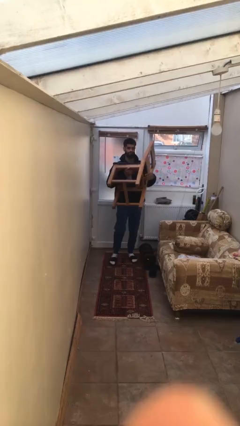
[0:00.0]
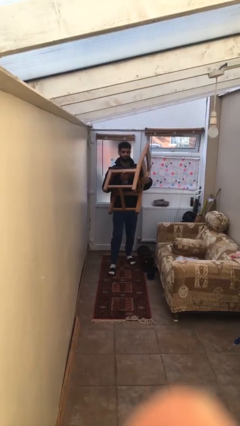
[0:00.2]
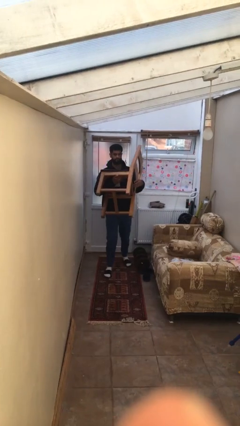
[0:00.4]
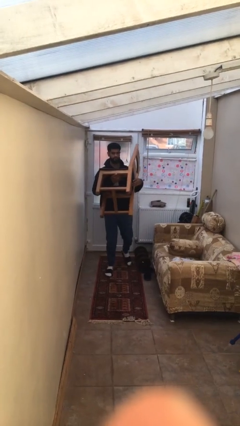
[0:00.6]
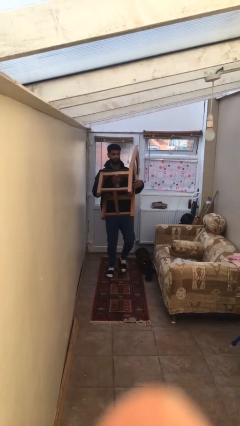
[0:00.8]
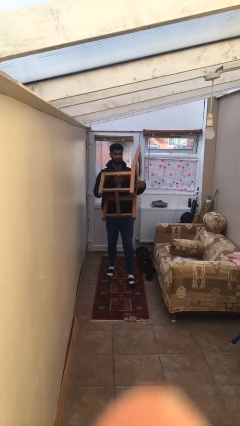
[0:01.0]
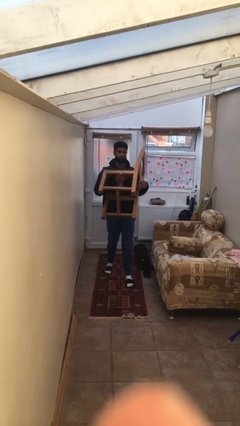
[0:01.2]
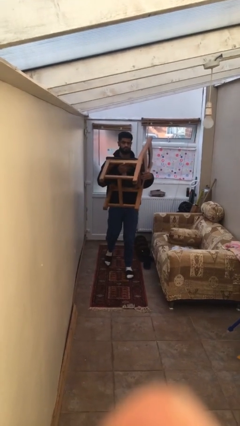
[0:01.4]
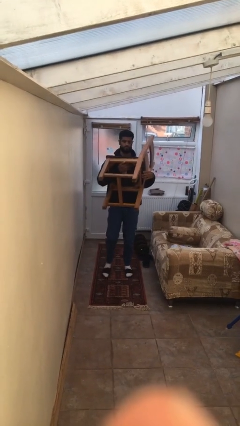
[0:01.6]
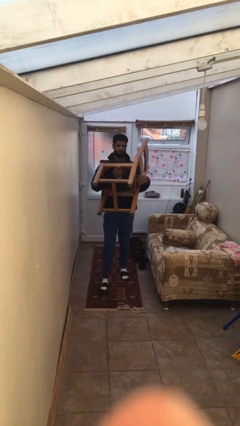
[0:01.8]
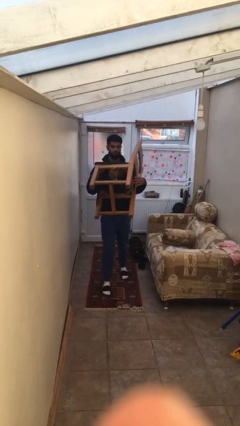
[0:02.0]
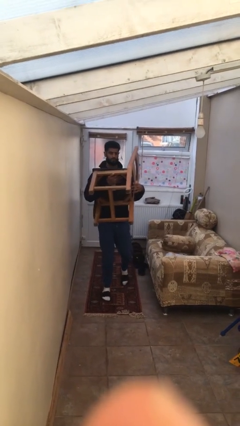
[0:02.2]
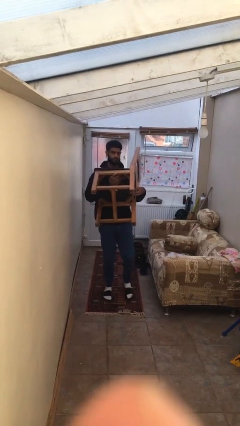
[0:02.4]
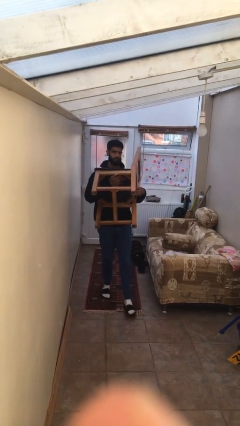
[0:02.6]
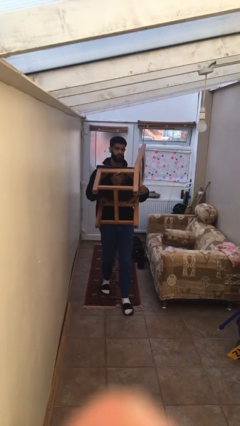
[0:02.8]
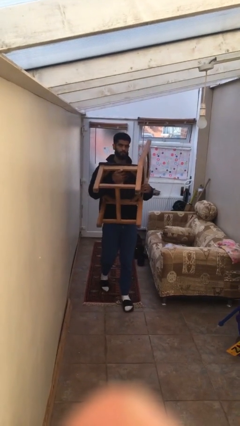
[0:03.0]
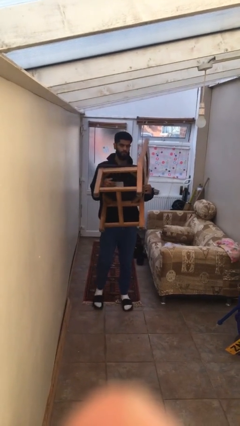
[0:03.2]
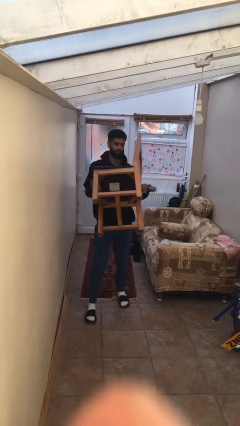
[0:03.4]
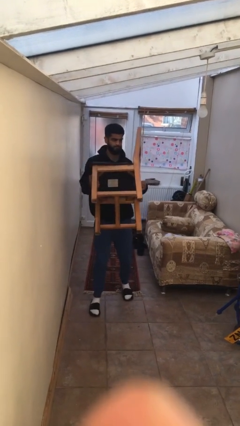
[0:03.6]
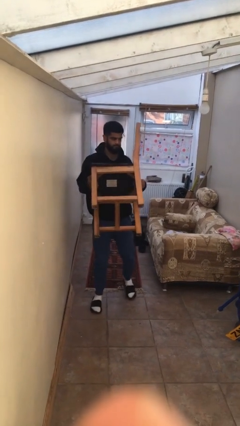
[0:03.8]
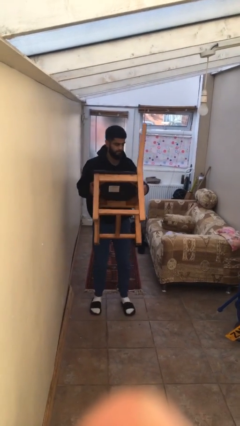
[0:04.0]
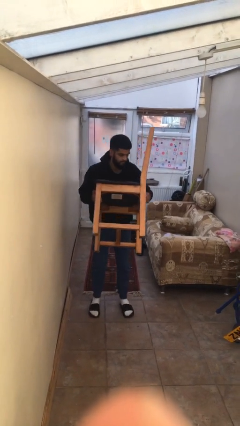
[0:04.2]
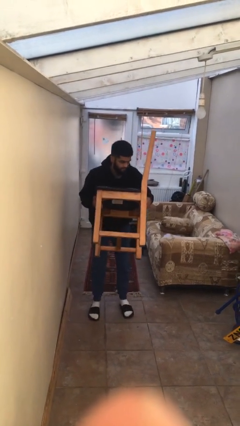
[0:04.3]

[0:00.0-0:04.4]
person carries heavy object

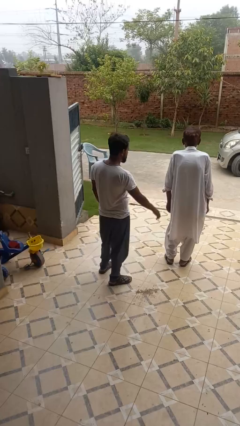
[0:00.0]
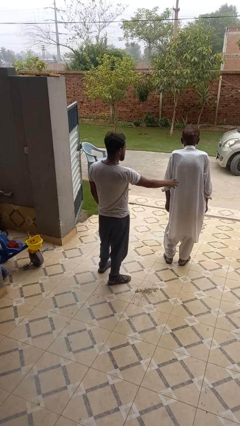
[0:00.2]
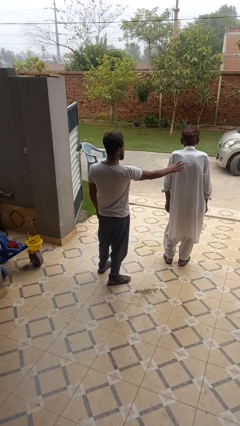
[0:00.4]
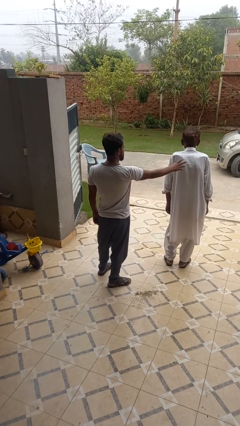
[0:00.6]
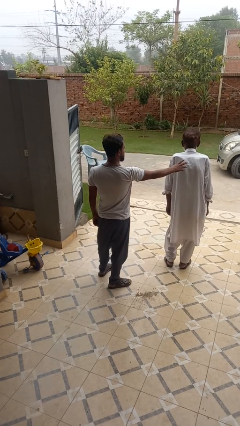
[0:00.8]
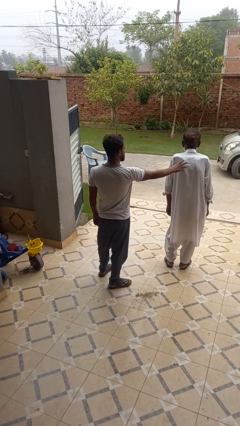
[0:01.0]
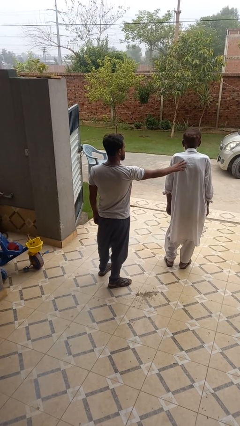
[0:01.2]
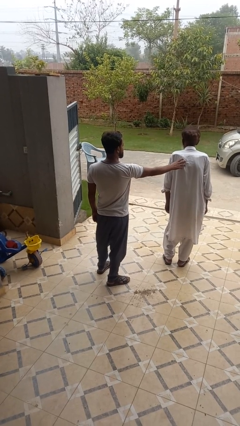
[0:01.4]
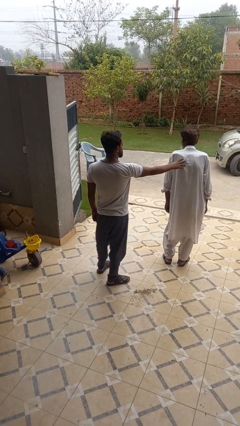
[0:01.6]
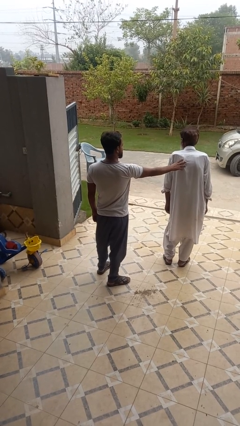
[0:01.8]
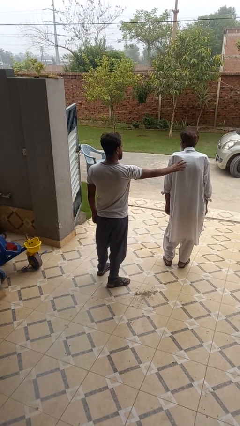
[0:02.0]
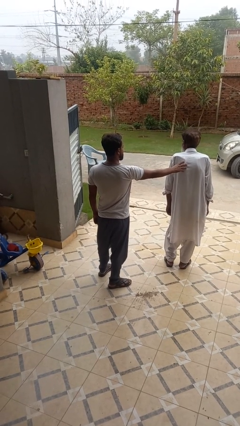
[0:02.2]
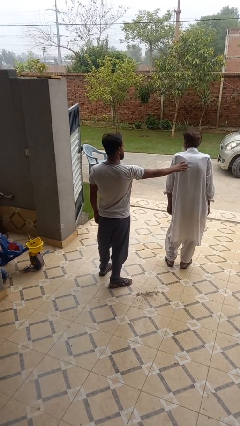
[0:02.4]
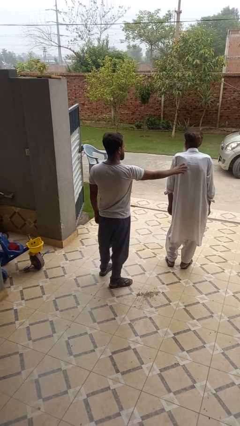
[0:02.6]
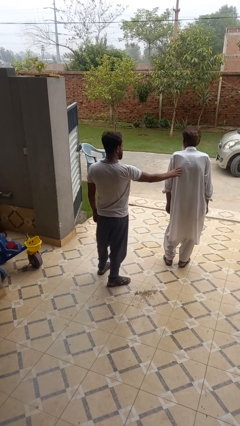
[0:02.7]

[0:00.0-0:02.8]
person touches back of person

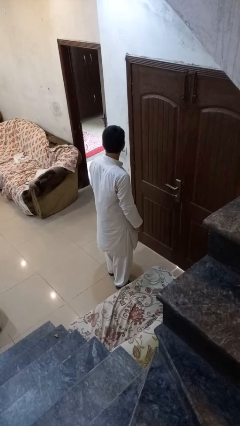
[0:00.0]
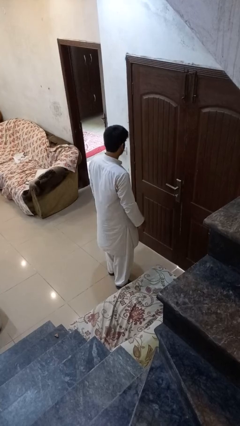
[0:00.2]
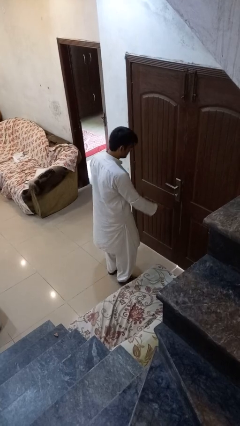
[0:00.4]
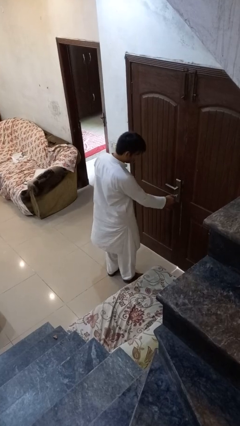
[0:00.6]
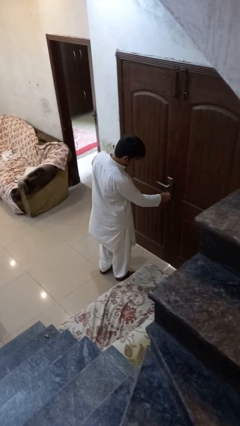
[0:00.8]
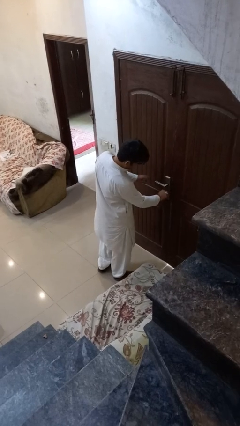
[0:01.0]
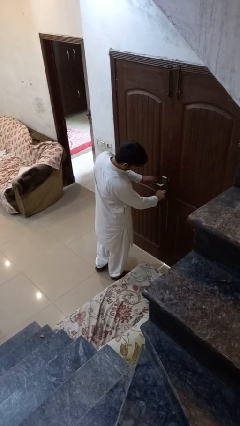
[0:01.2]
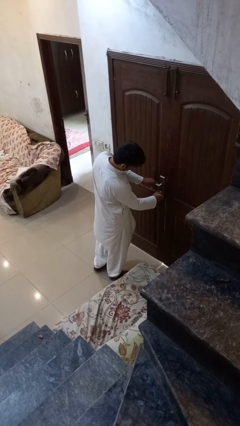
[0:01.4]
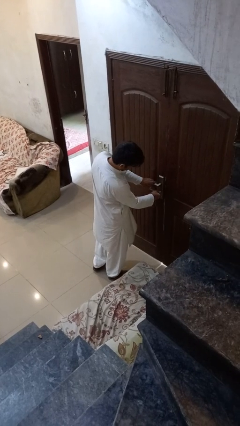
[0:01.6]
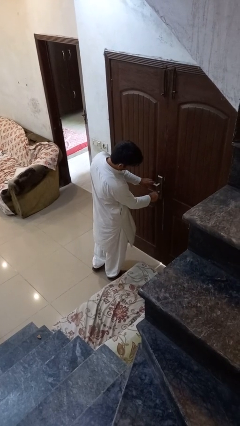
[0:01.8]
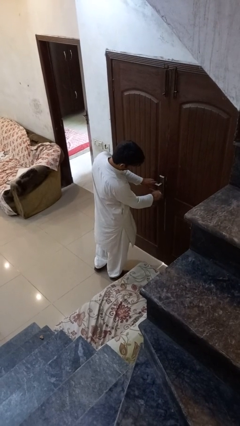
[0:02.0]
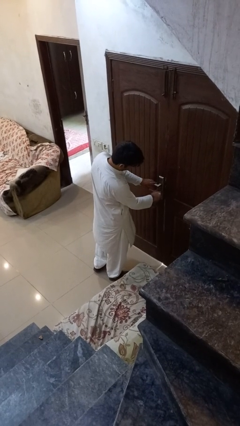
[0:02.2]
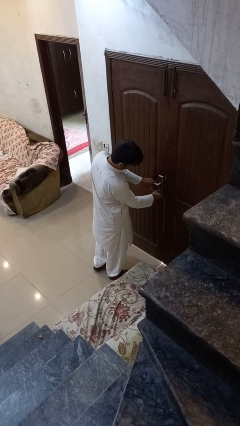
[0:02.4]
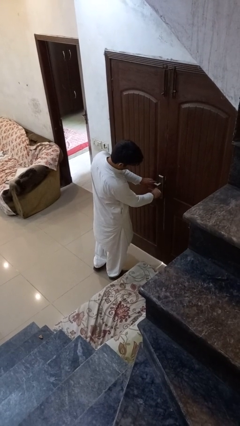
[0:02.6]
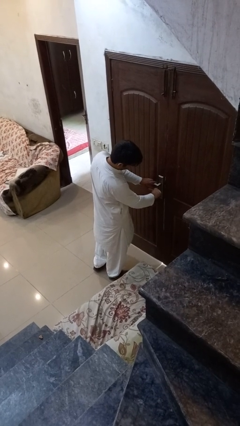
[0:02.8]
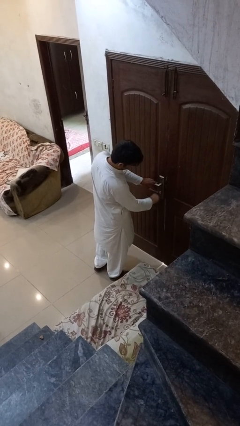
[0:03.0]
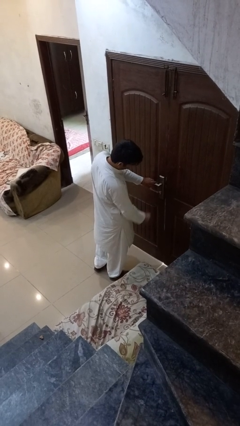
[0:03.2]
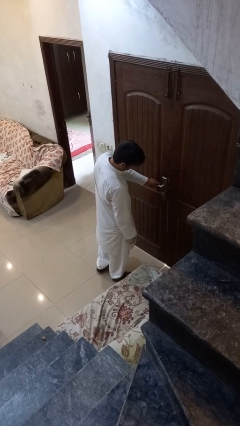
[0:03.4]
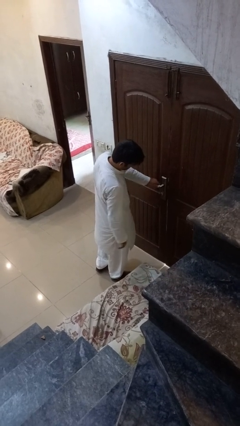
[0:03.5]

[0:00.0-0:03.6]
person unlocks door with keys

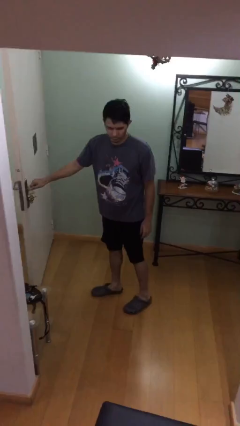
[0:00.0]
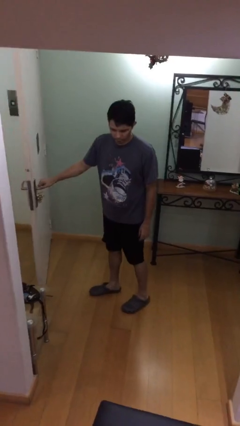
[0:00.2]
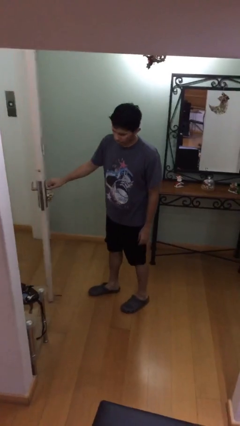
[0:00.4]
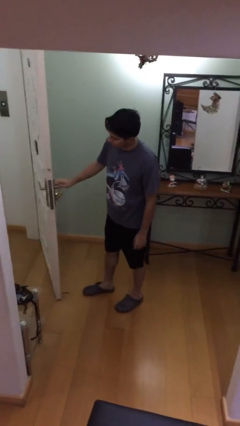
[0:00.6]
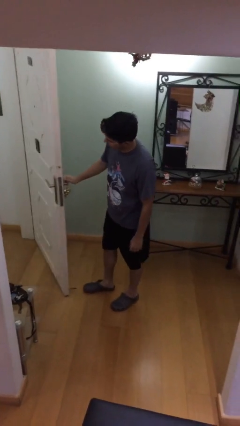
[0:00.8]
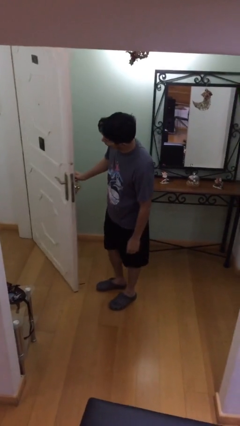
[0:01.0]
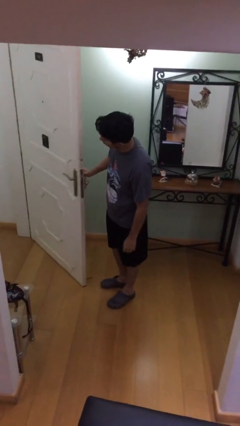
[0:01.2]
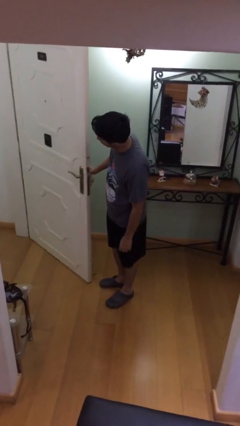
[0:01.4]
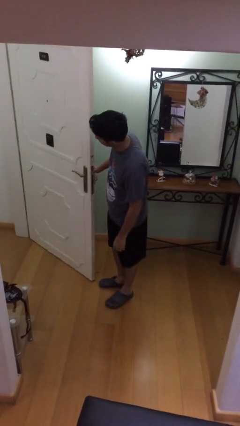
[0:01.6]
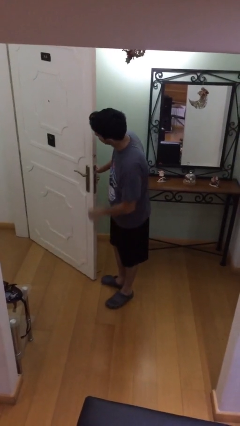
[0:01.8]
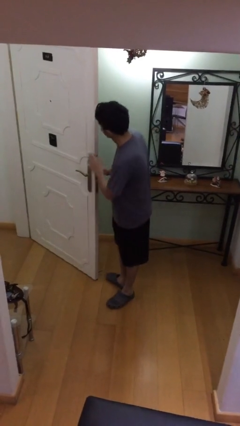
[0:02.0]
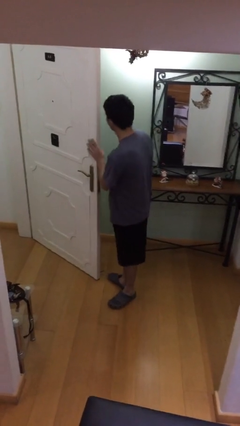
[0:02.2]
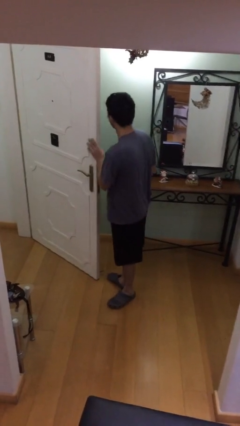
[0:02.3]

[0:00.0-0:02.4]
person opens facility door

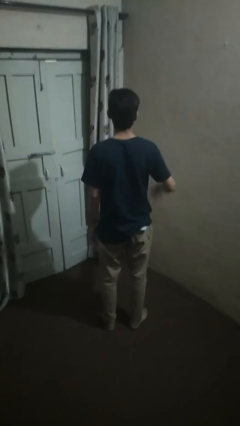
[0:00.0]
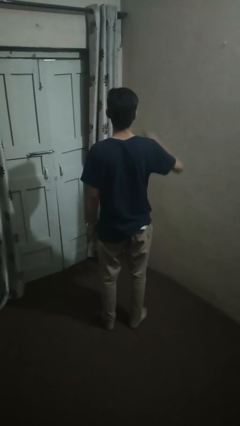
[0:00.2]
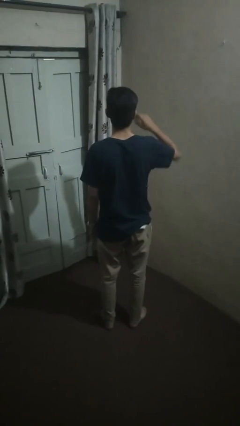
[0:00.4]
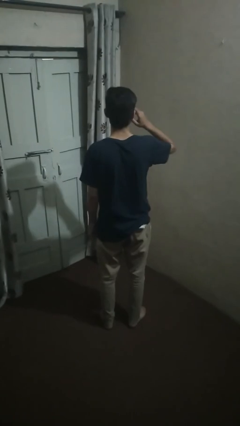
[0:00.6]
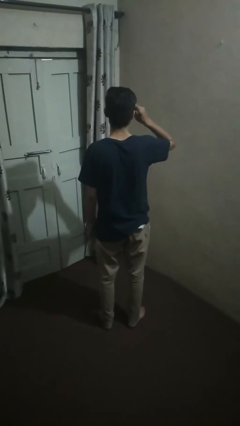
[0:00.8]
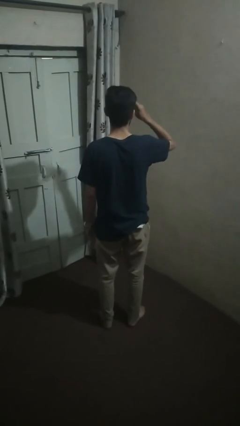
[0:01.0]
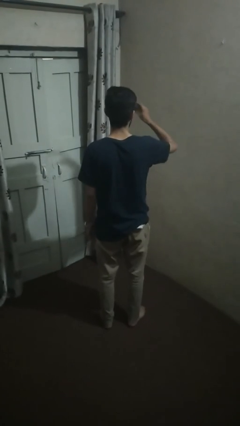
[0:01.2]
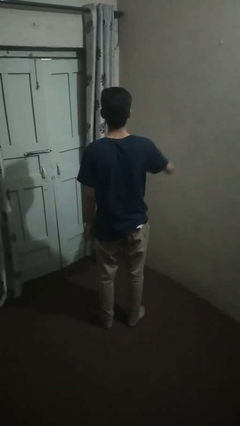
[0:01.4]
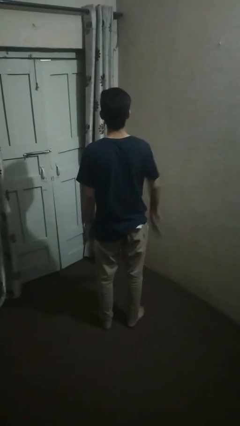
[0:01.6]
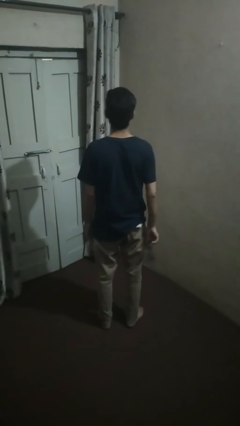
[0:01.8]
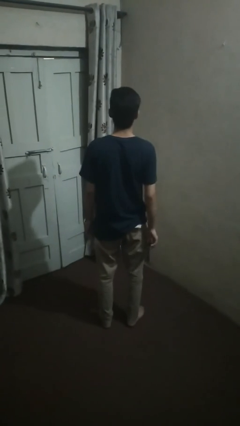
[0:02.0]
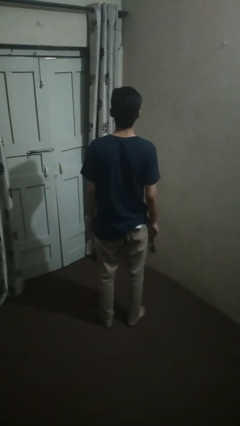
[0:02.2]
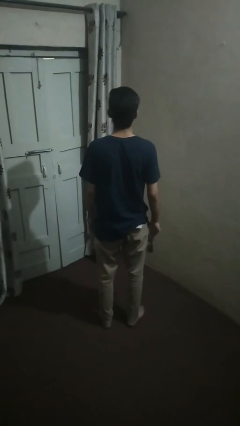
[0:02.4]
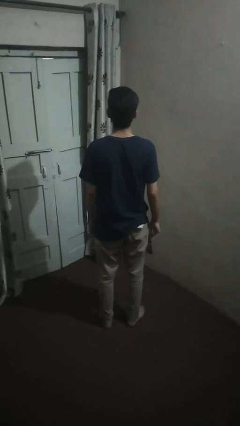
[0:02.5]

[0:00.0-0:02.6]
person takes off sunglasses

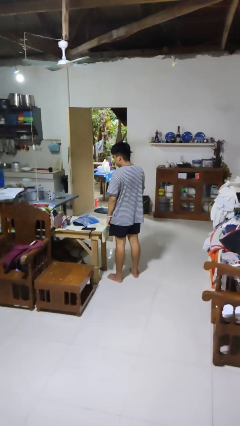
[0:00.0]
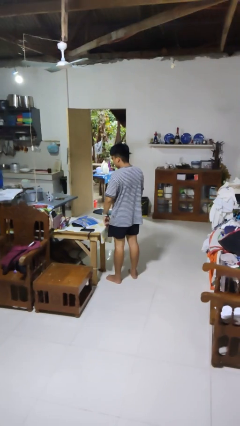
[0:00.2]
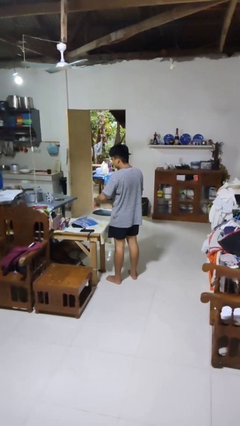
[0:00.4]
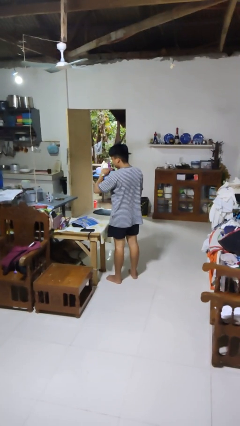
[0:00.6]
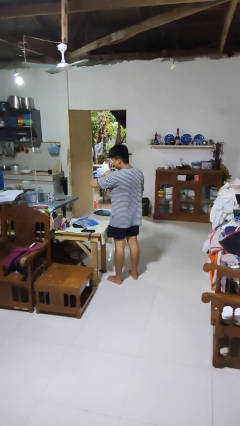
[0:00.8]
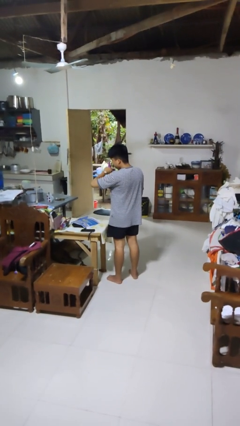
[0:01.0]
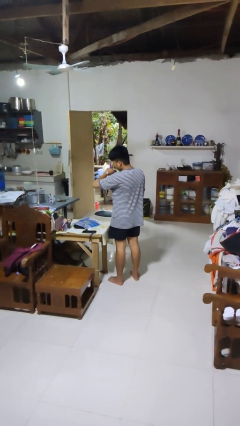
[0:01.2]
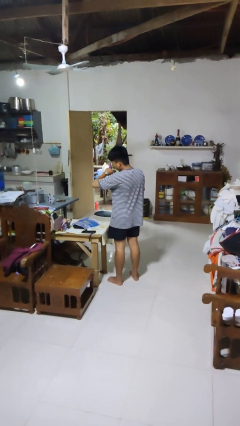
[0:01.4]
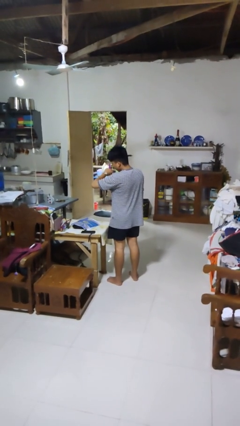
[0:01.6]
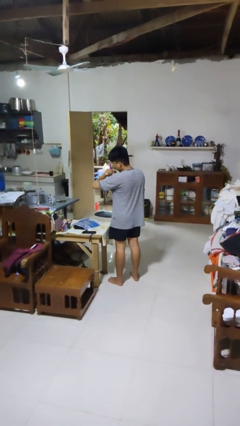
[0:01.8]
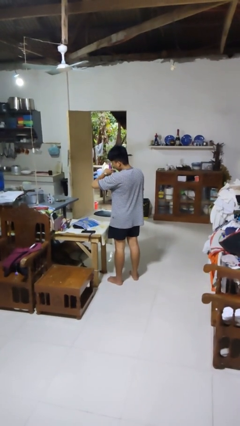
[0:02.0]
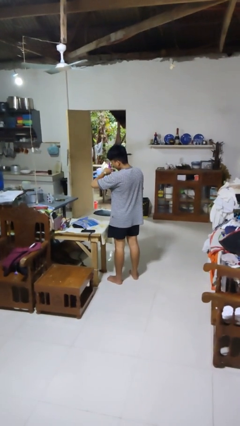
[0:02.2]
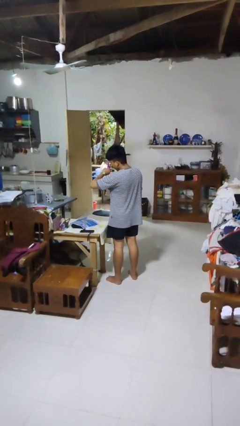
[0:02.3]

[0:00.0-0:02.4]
person looks at wristwatch
